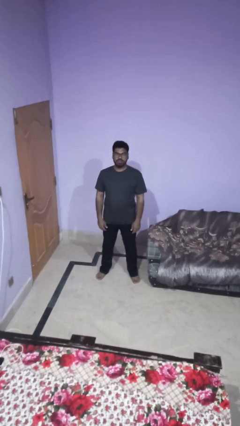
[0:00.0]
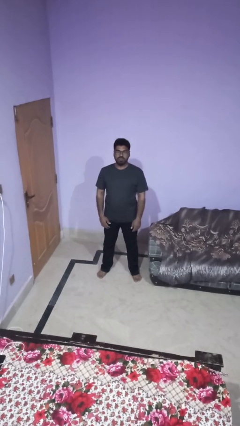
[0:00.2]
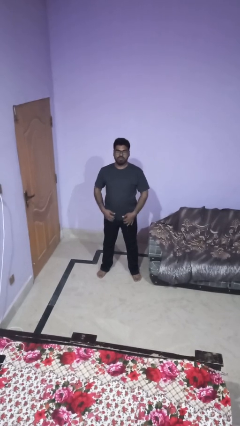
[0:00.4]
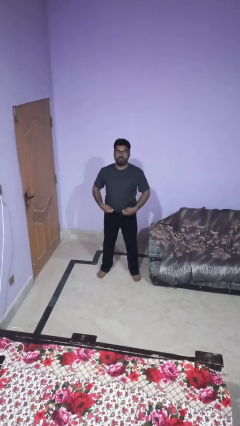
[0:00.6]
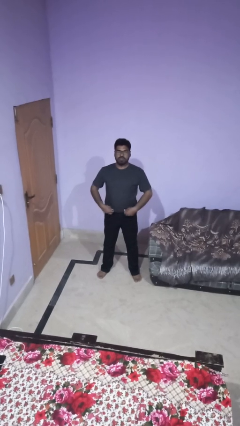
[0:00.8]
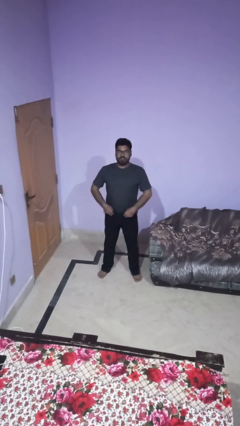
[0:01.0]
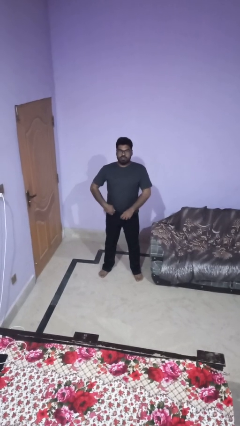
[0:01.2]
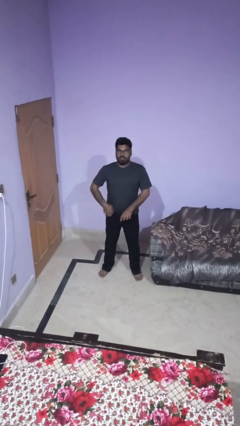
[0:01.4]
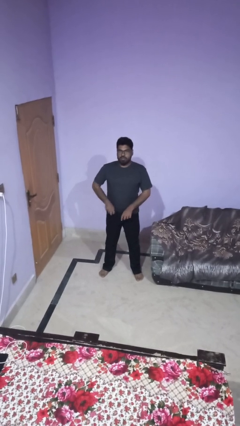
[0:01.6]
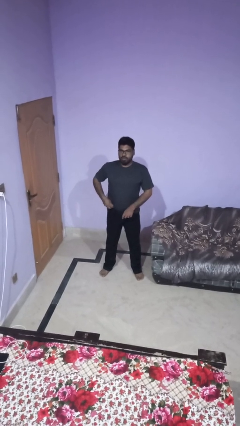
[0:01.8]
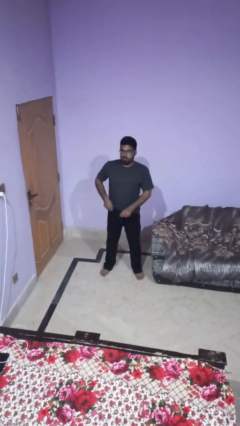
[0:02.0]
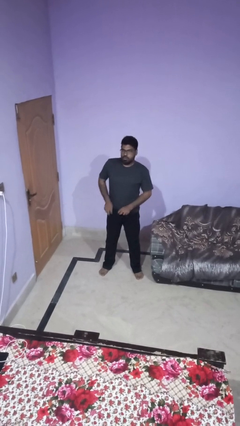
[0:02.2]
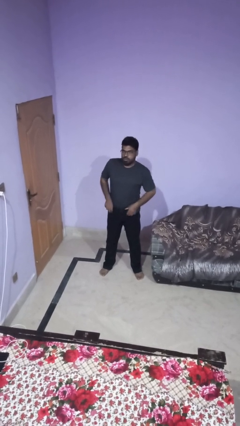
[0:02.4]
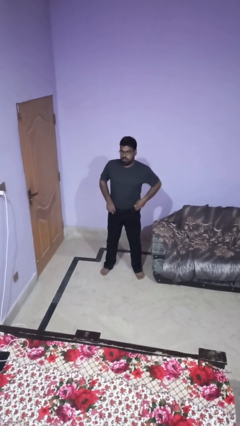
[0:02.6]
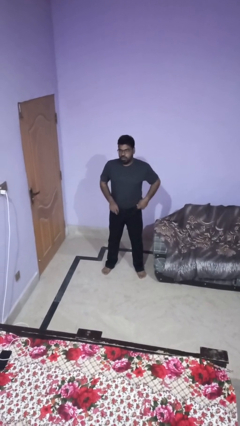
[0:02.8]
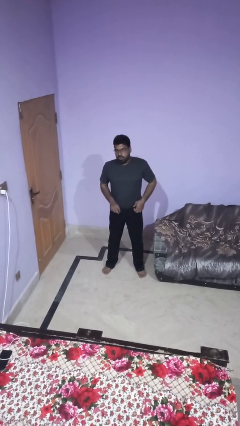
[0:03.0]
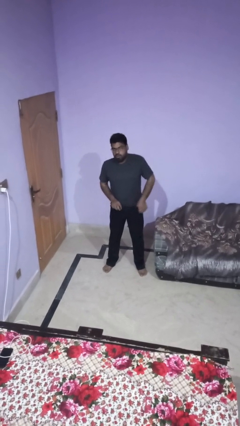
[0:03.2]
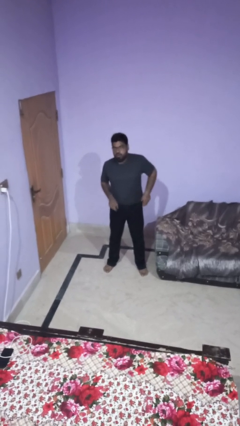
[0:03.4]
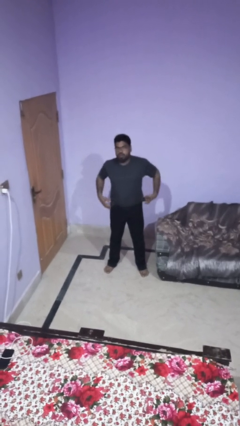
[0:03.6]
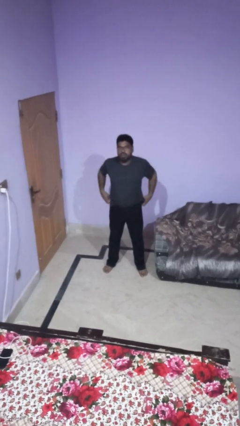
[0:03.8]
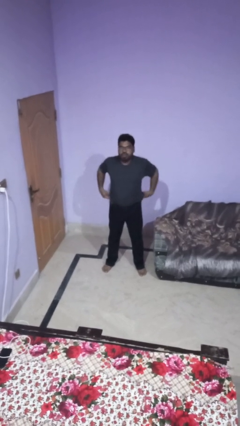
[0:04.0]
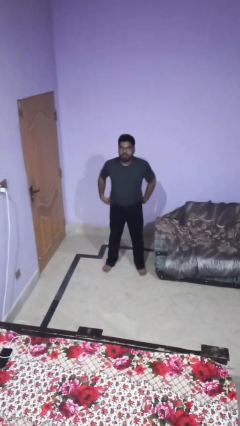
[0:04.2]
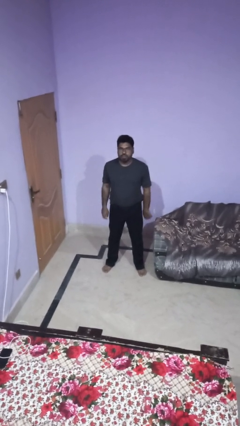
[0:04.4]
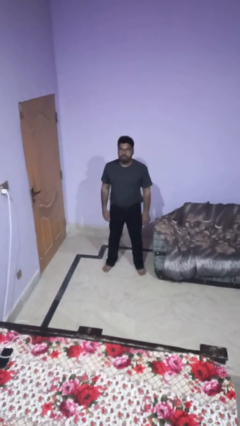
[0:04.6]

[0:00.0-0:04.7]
person tucks in shirt

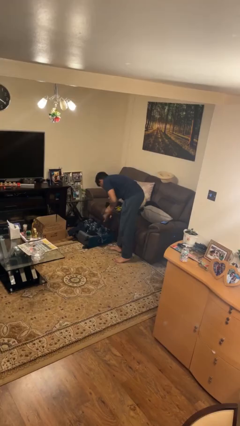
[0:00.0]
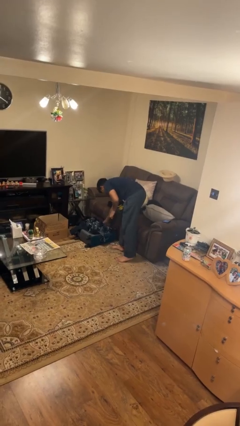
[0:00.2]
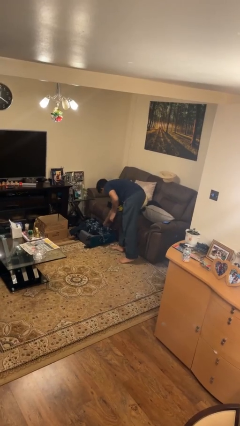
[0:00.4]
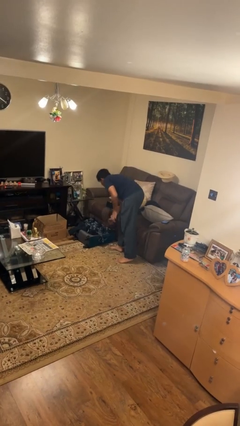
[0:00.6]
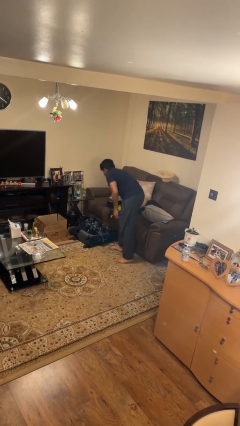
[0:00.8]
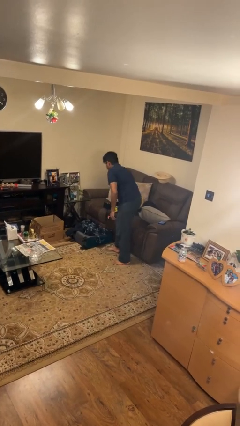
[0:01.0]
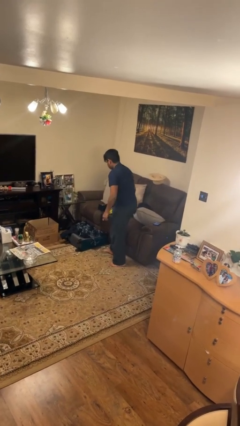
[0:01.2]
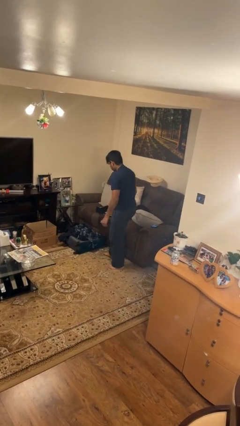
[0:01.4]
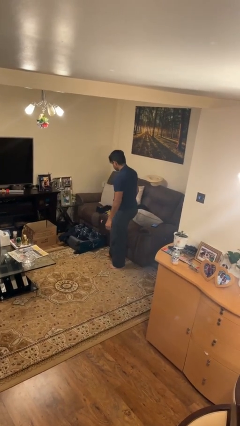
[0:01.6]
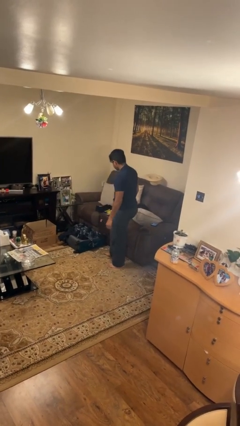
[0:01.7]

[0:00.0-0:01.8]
person loads clothes into suitcase

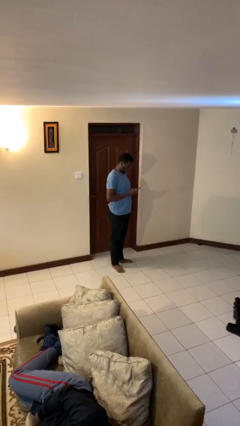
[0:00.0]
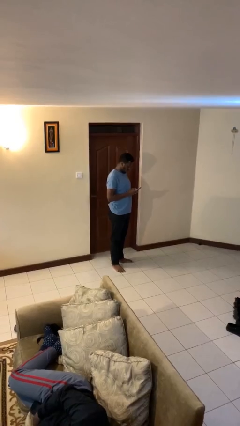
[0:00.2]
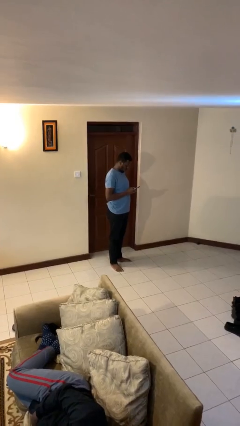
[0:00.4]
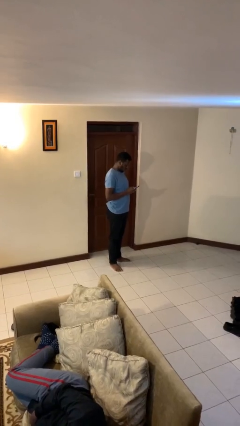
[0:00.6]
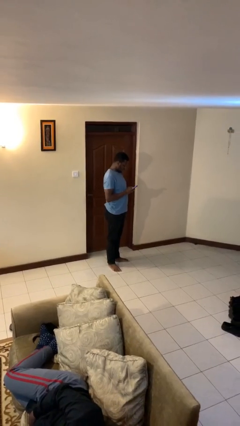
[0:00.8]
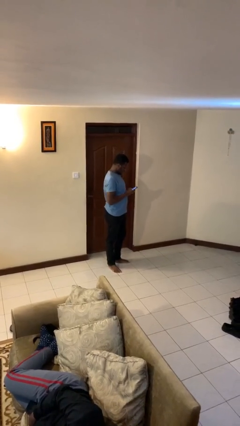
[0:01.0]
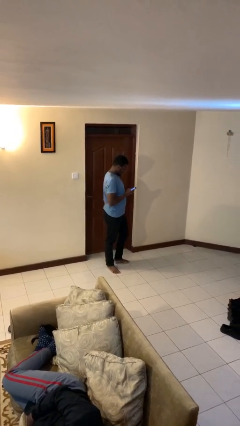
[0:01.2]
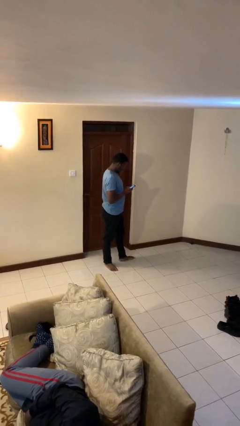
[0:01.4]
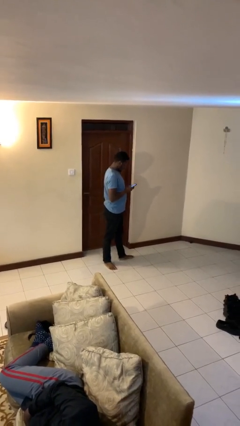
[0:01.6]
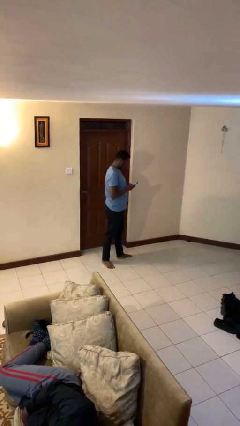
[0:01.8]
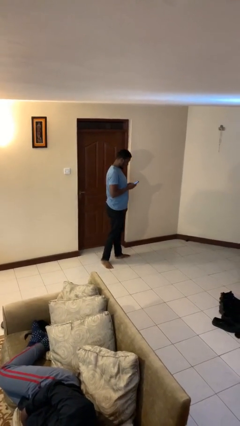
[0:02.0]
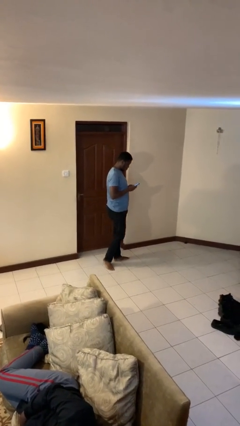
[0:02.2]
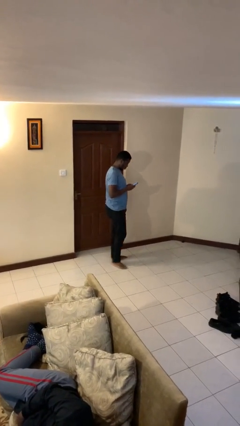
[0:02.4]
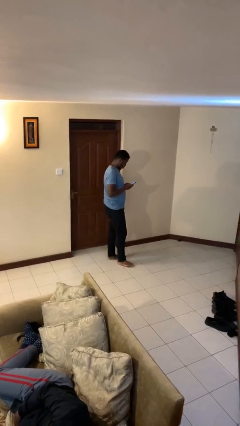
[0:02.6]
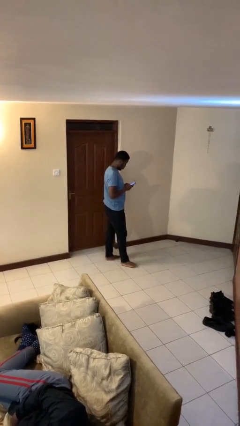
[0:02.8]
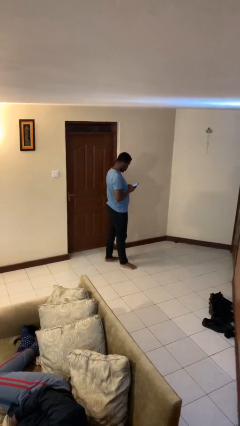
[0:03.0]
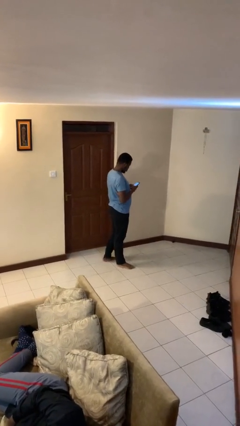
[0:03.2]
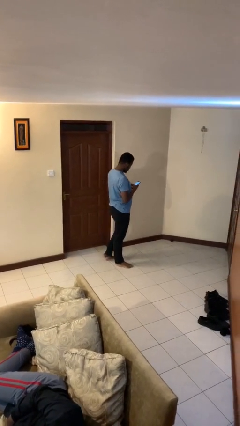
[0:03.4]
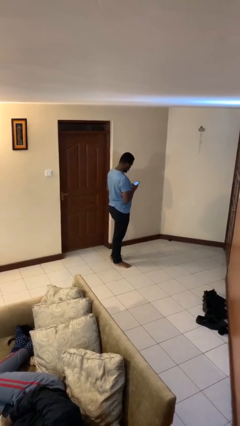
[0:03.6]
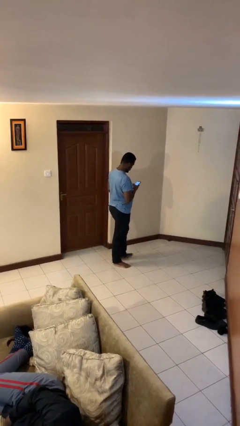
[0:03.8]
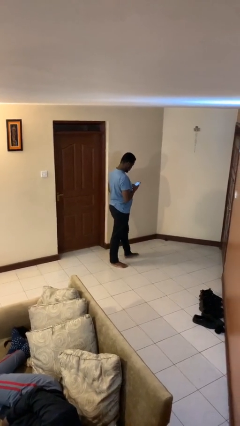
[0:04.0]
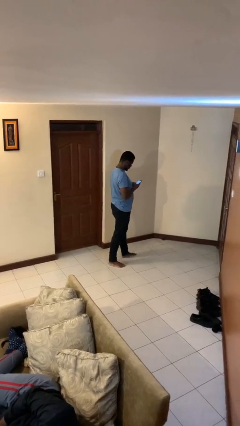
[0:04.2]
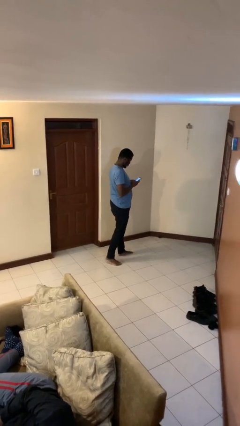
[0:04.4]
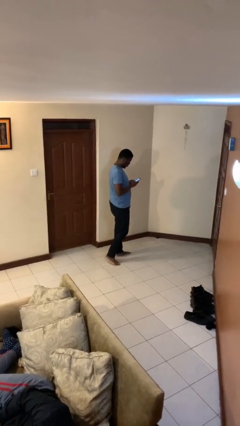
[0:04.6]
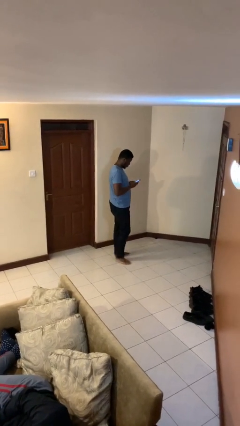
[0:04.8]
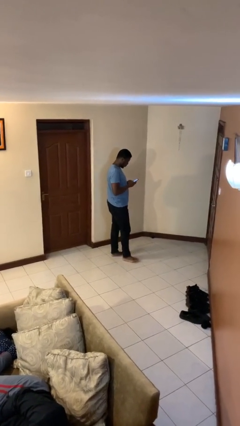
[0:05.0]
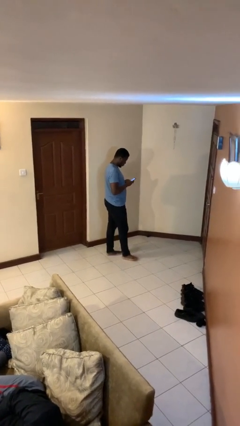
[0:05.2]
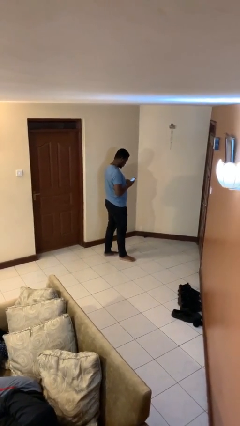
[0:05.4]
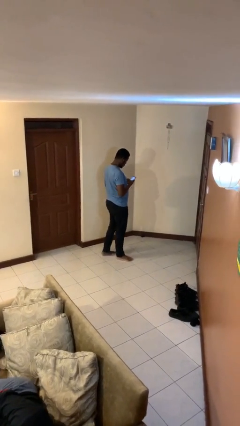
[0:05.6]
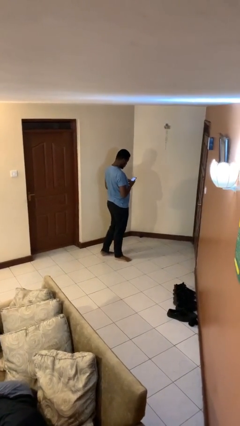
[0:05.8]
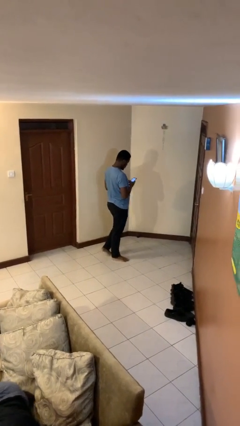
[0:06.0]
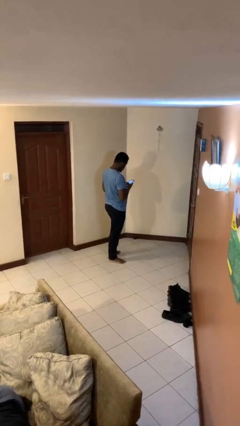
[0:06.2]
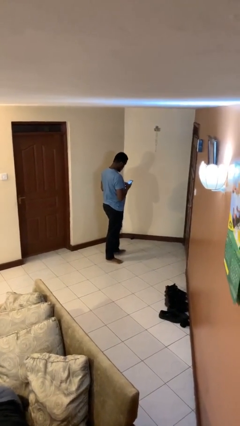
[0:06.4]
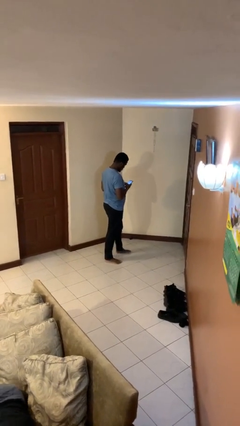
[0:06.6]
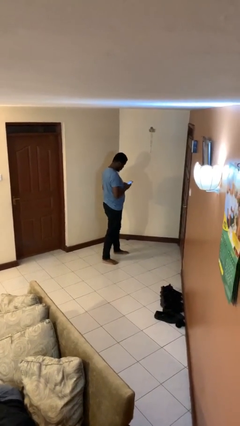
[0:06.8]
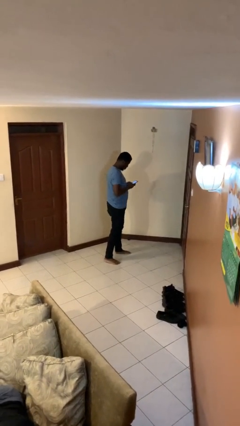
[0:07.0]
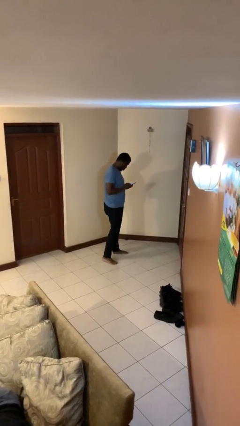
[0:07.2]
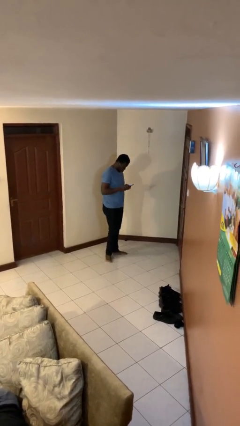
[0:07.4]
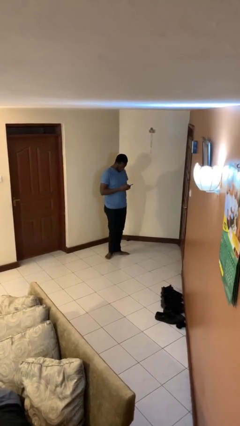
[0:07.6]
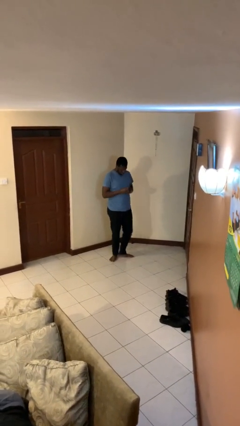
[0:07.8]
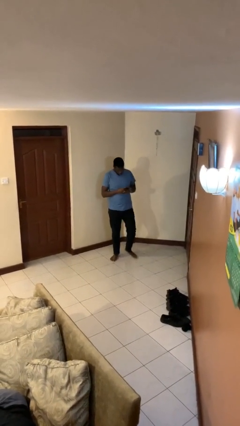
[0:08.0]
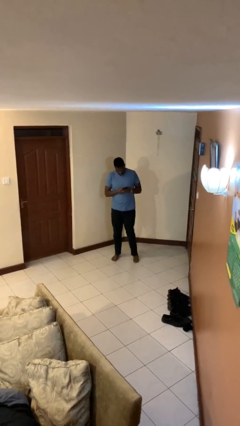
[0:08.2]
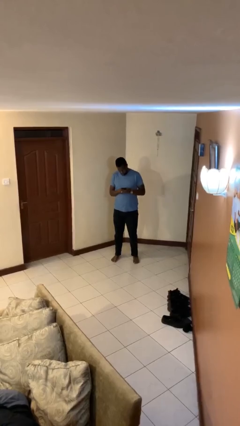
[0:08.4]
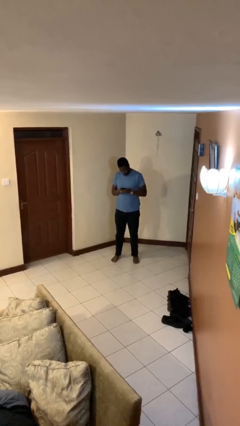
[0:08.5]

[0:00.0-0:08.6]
person texts on phone

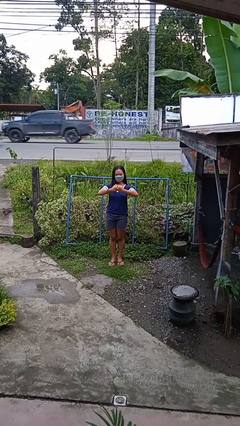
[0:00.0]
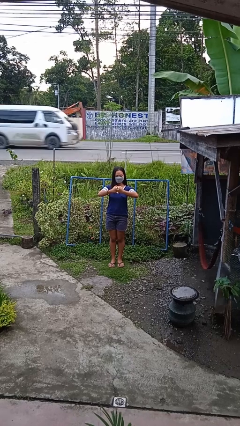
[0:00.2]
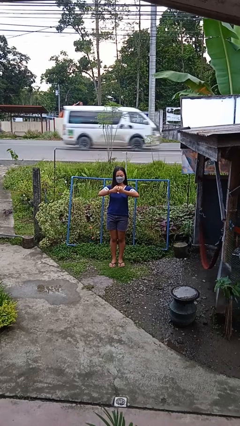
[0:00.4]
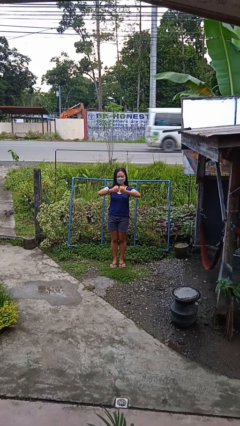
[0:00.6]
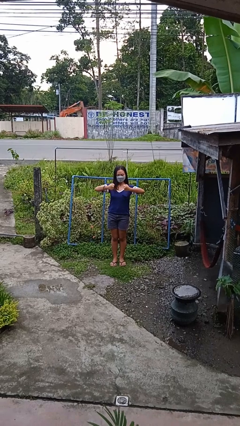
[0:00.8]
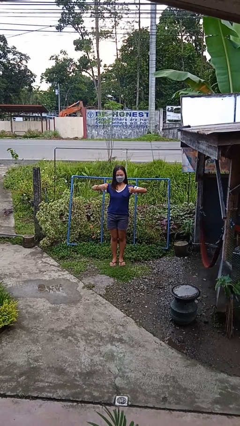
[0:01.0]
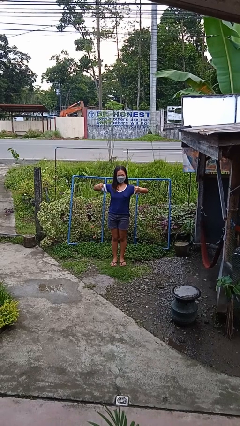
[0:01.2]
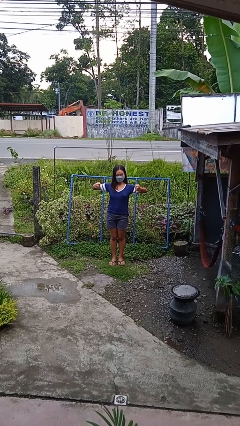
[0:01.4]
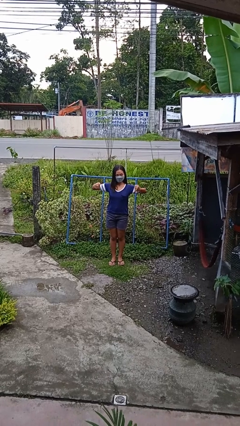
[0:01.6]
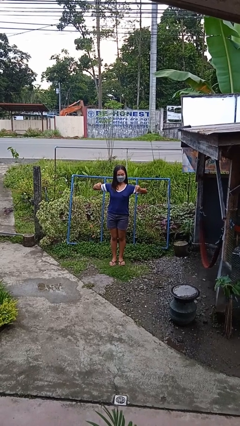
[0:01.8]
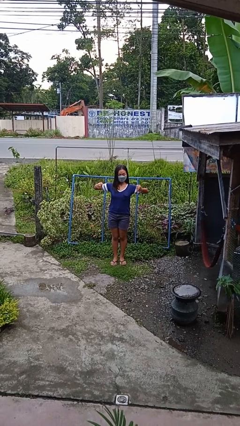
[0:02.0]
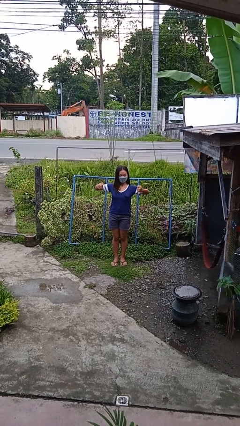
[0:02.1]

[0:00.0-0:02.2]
person gestures zoom in

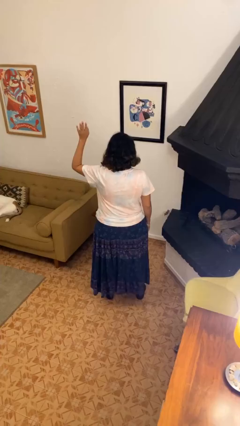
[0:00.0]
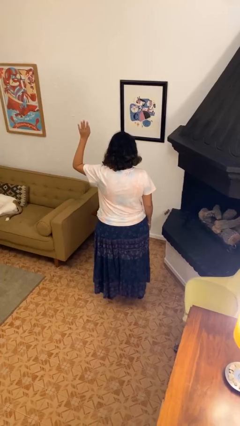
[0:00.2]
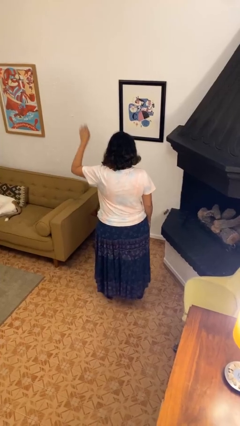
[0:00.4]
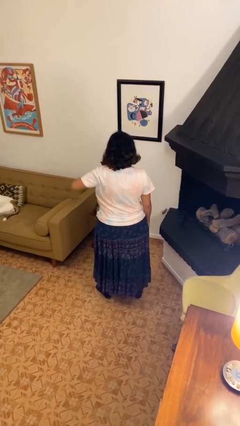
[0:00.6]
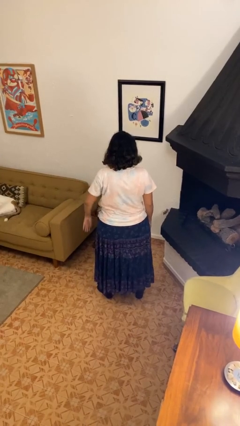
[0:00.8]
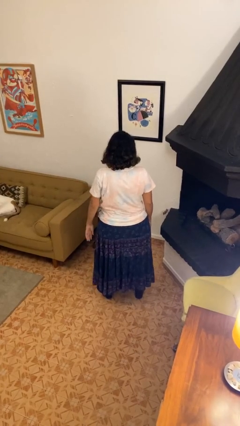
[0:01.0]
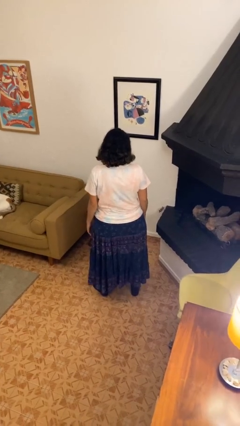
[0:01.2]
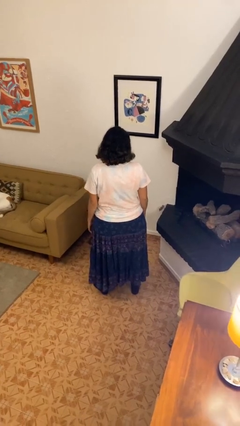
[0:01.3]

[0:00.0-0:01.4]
person gestures lower hand
